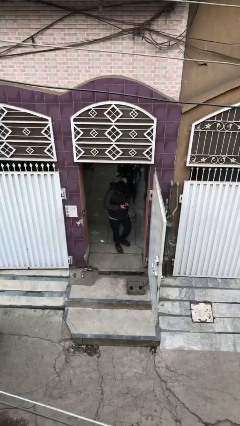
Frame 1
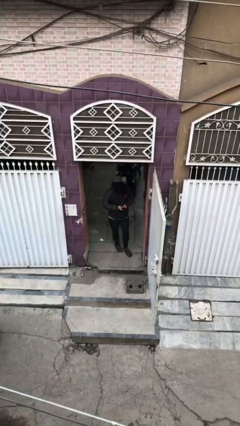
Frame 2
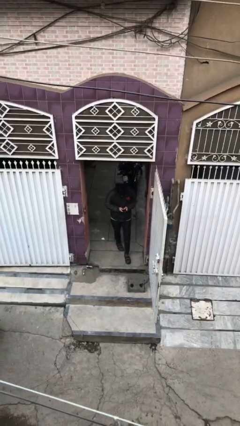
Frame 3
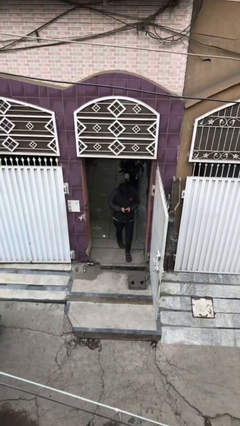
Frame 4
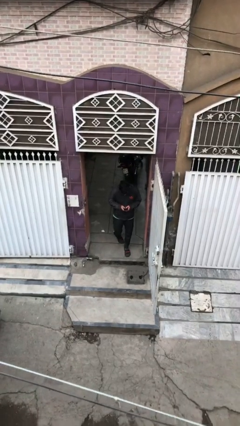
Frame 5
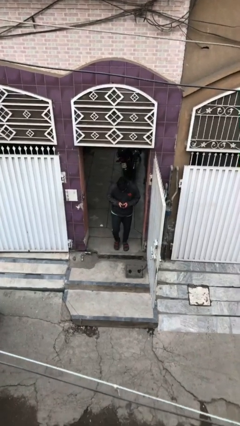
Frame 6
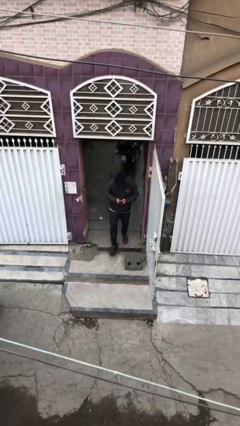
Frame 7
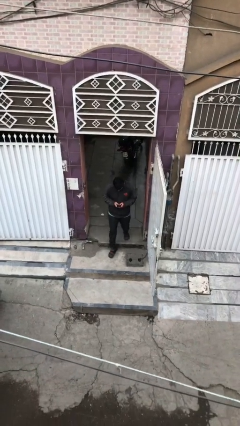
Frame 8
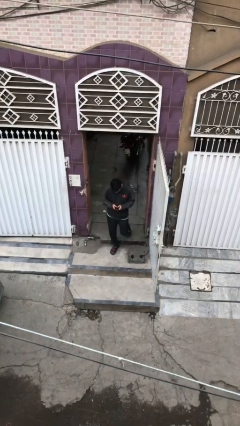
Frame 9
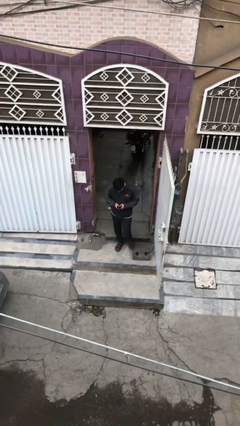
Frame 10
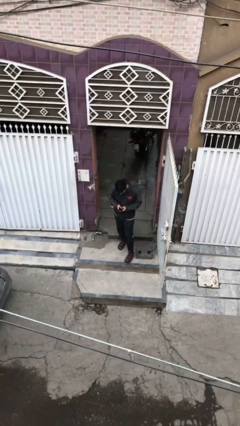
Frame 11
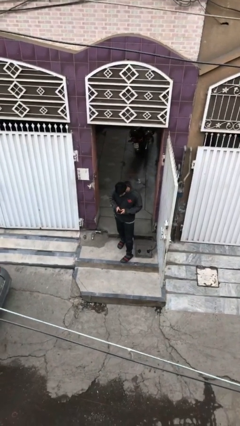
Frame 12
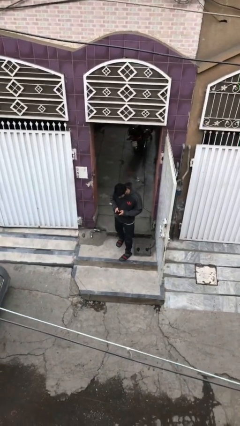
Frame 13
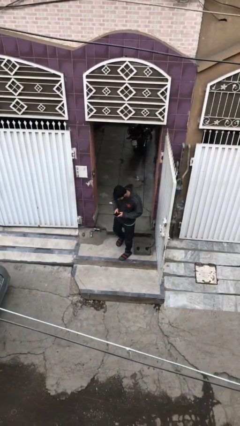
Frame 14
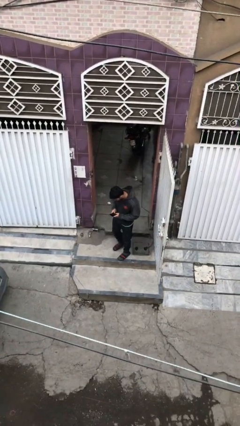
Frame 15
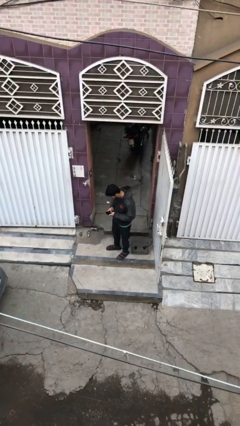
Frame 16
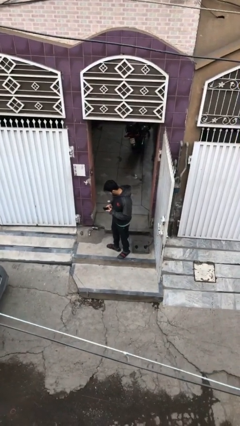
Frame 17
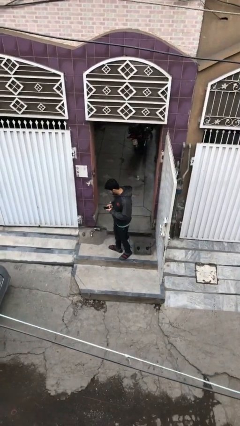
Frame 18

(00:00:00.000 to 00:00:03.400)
person enters scene through structure

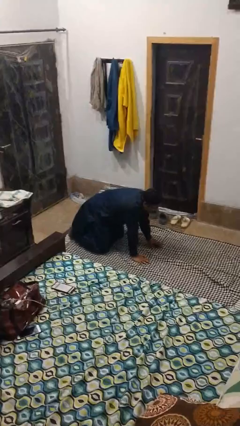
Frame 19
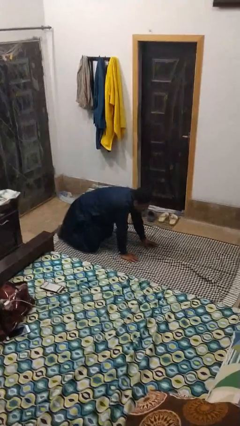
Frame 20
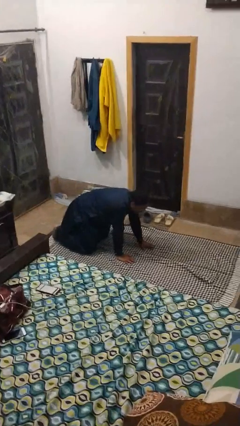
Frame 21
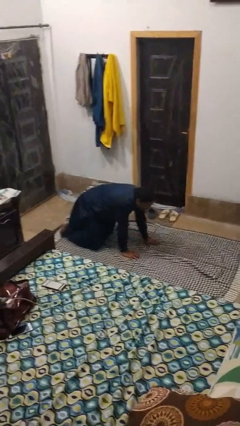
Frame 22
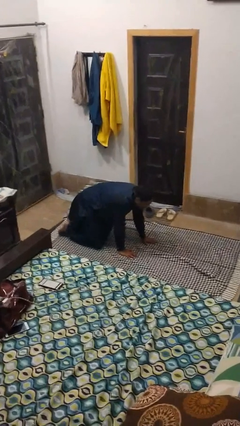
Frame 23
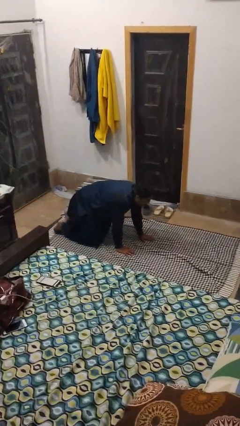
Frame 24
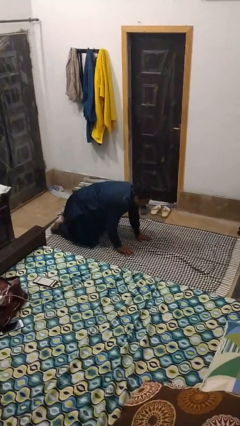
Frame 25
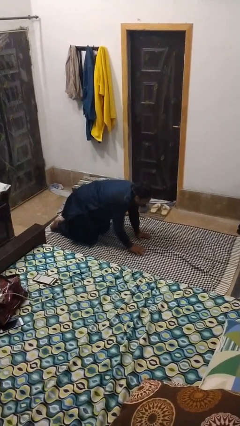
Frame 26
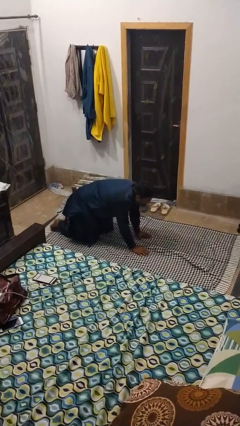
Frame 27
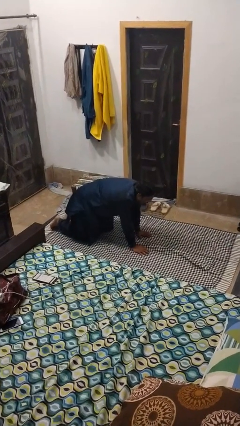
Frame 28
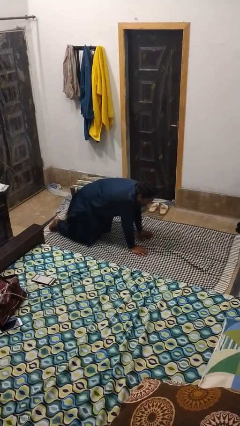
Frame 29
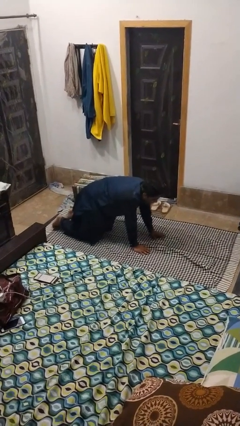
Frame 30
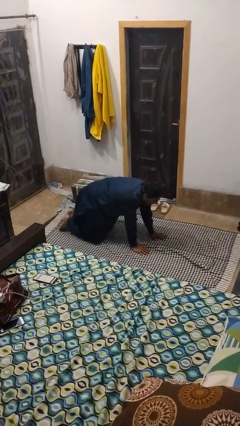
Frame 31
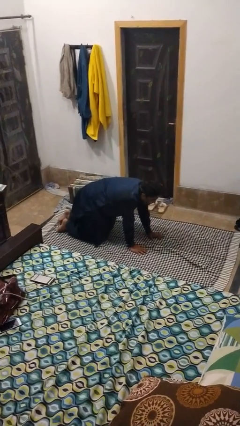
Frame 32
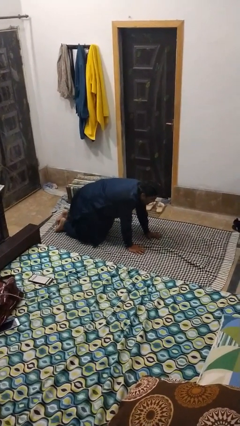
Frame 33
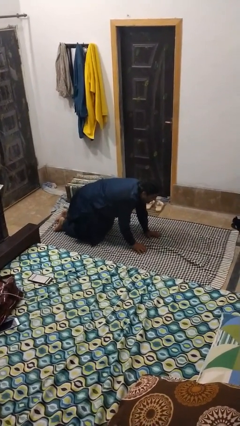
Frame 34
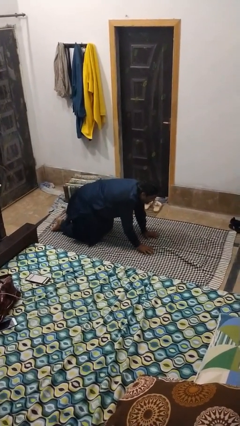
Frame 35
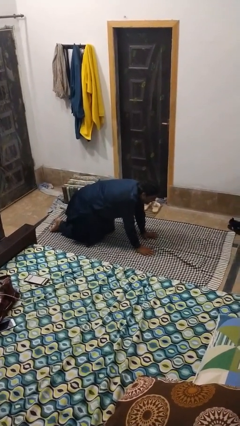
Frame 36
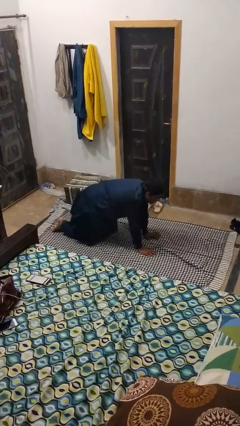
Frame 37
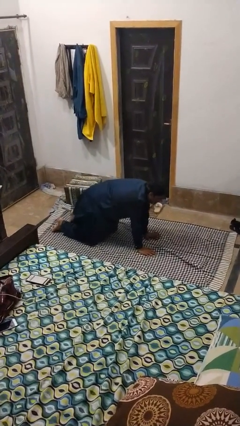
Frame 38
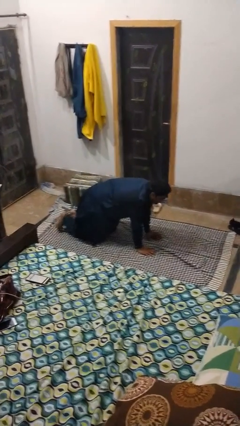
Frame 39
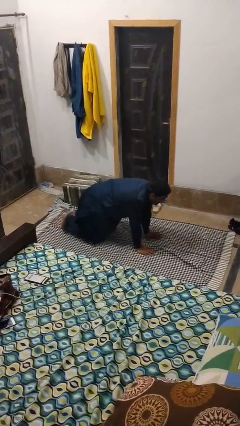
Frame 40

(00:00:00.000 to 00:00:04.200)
person crawls

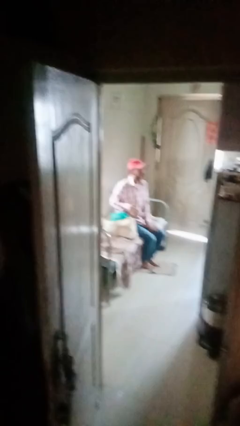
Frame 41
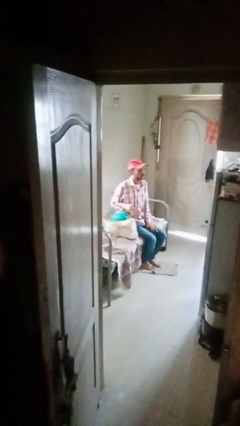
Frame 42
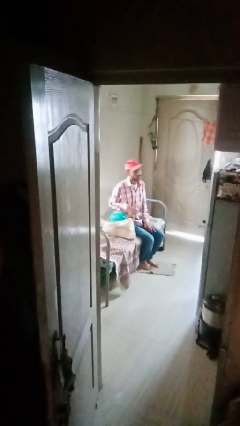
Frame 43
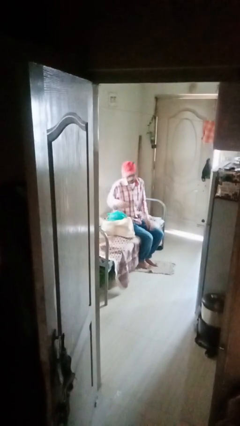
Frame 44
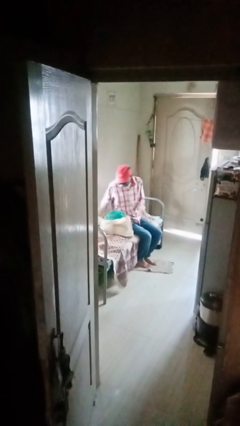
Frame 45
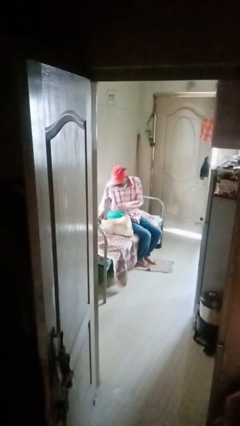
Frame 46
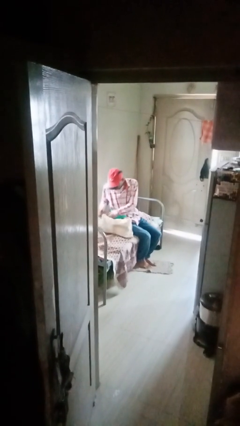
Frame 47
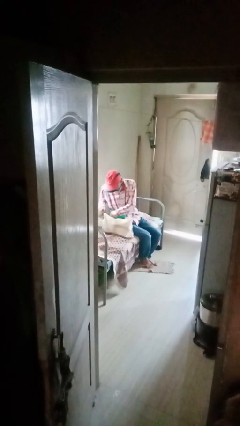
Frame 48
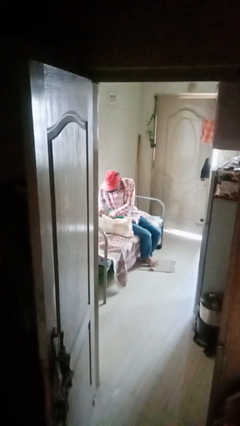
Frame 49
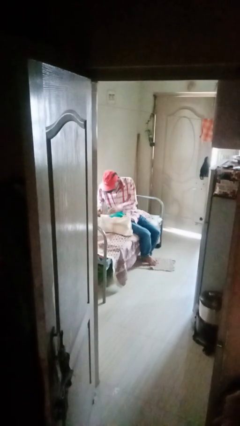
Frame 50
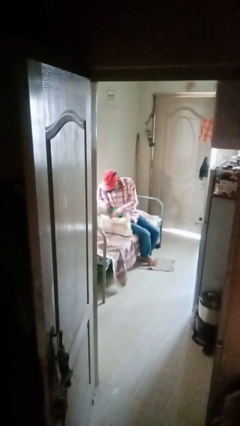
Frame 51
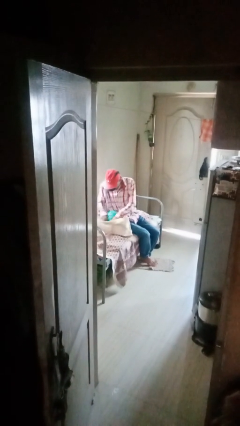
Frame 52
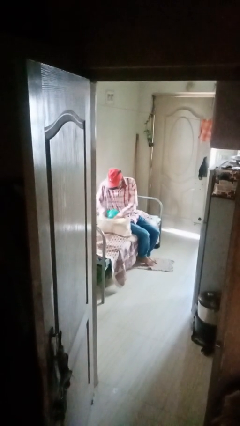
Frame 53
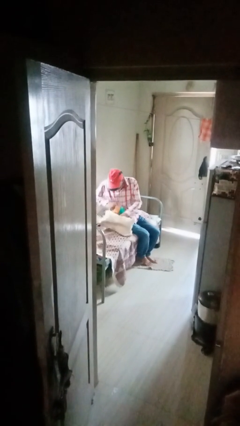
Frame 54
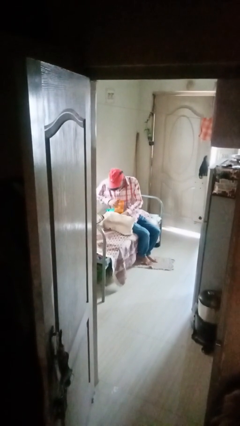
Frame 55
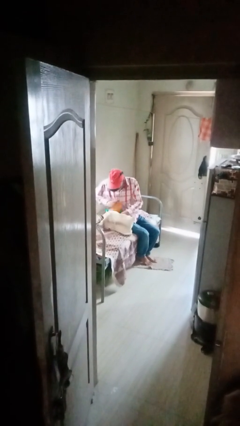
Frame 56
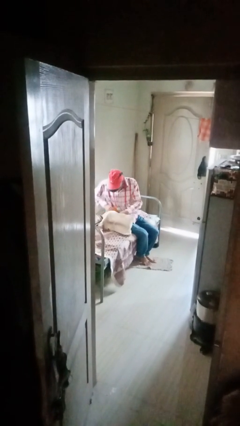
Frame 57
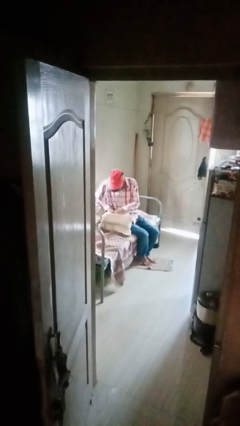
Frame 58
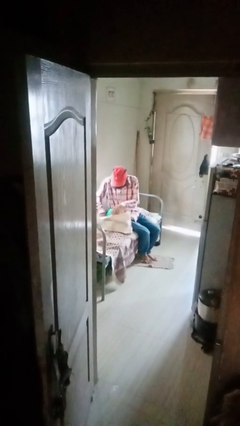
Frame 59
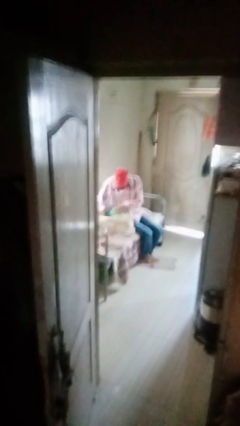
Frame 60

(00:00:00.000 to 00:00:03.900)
person searches in bag

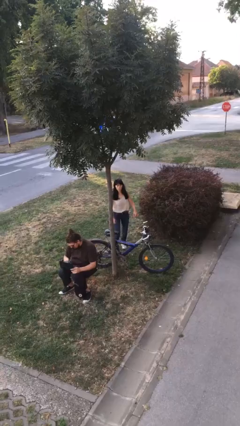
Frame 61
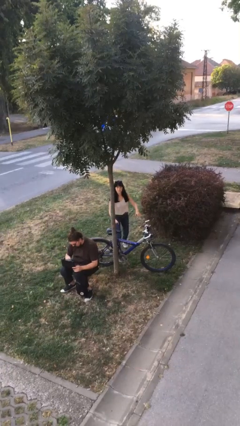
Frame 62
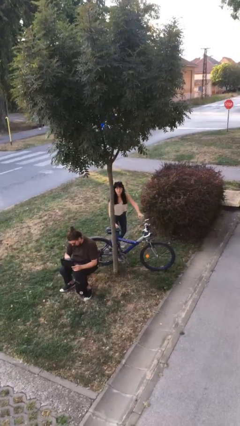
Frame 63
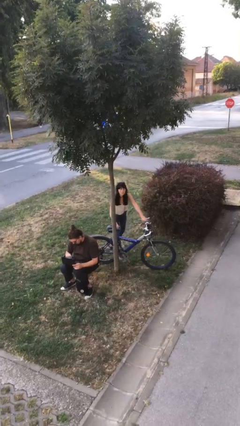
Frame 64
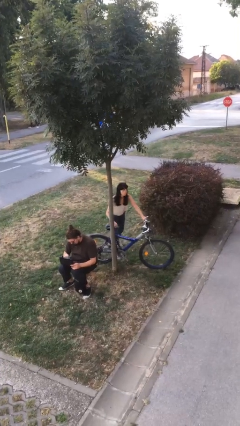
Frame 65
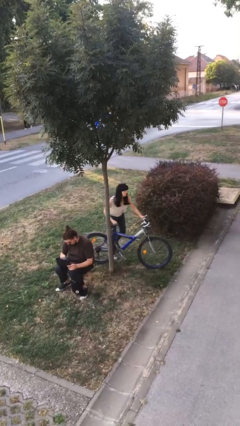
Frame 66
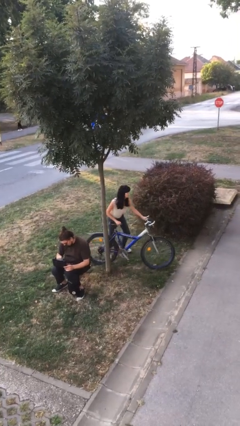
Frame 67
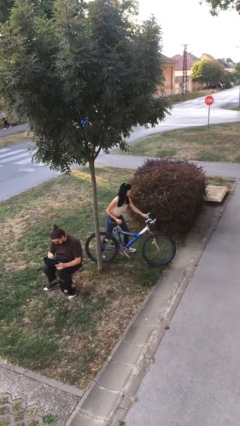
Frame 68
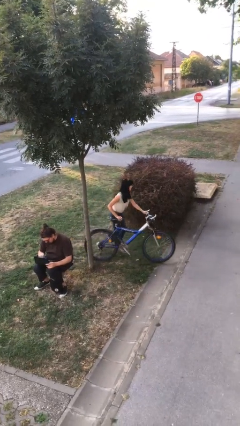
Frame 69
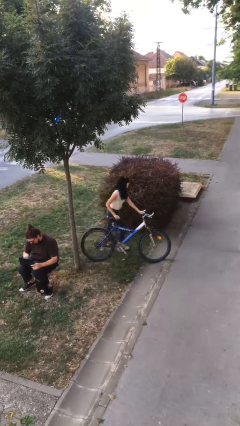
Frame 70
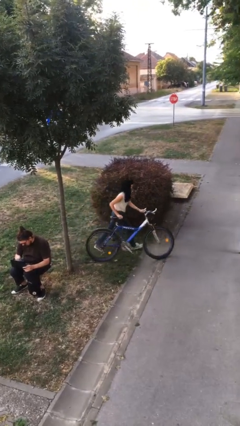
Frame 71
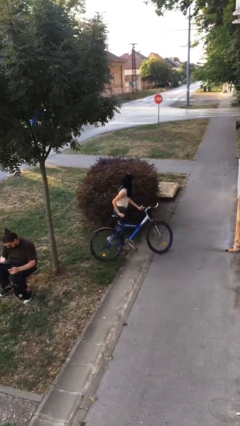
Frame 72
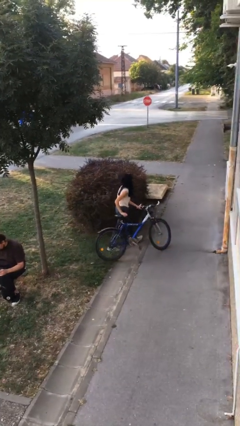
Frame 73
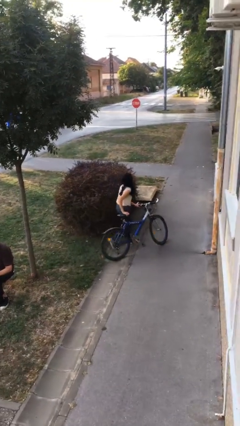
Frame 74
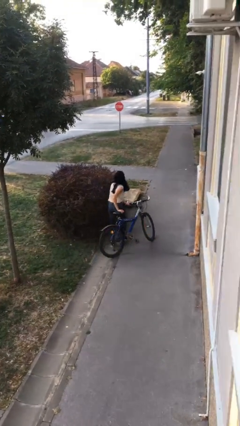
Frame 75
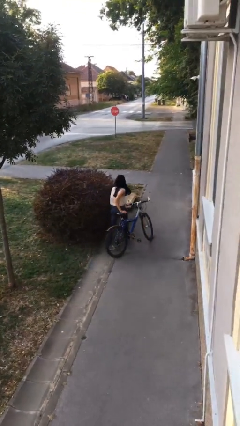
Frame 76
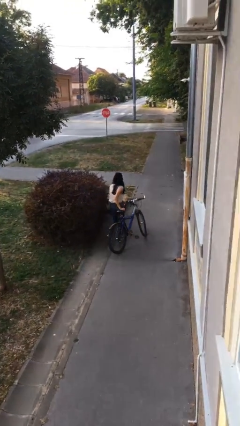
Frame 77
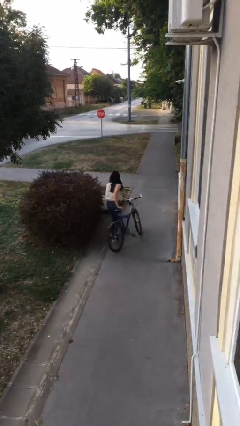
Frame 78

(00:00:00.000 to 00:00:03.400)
person steals object from person

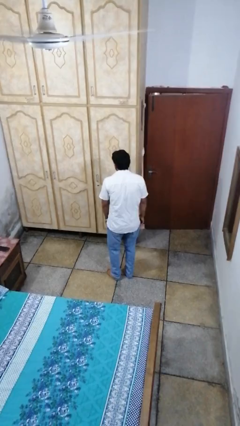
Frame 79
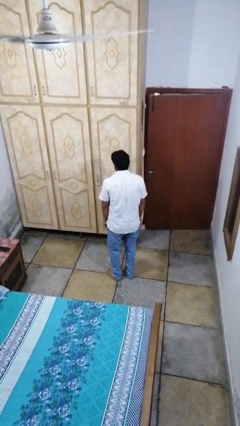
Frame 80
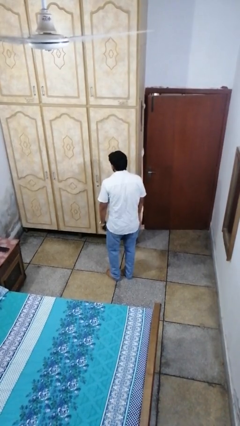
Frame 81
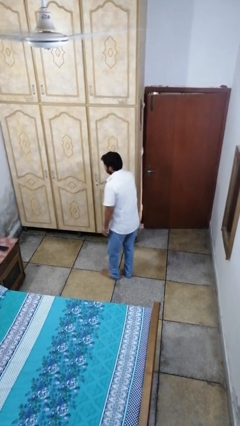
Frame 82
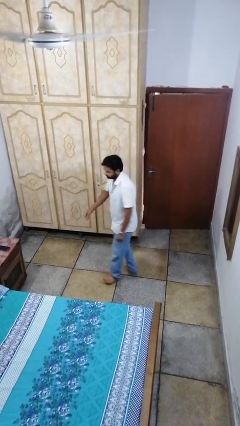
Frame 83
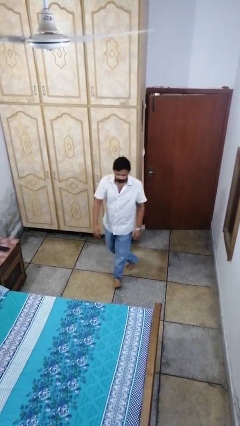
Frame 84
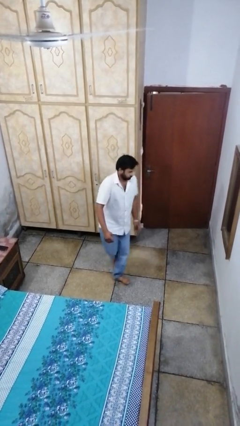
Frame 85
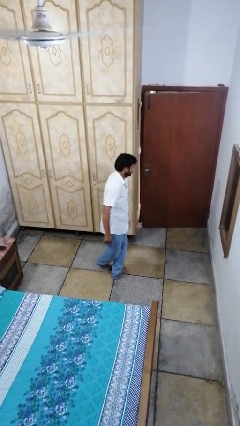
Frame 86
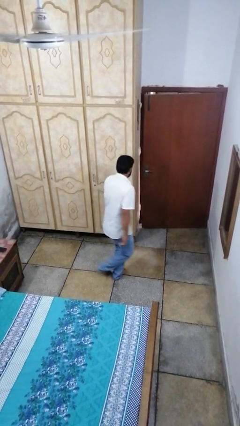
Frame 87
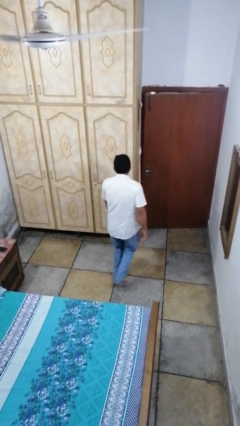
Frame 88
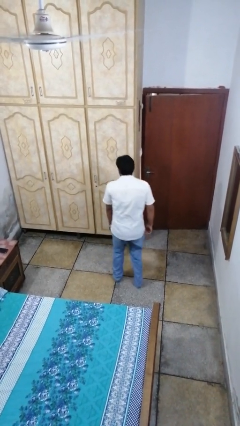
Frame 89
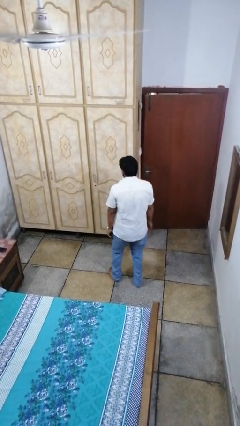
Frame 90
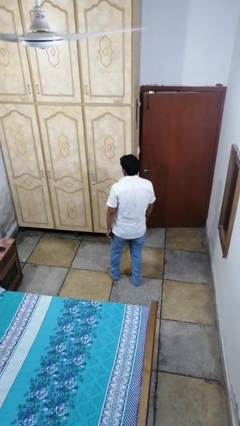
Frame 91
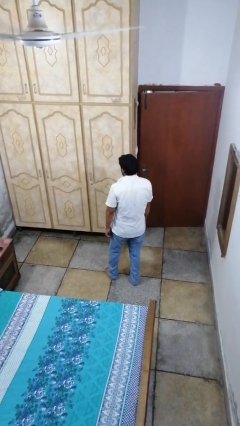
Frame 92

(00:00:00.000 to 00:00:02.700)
person twirls
